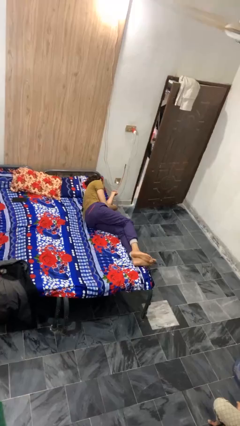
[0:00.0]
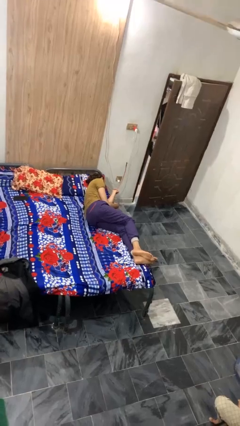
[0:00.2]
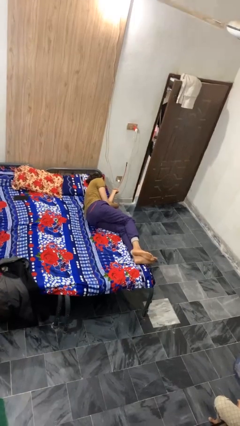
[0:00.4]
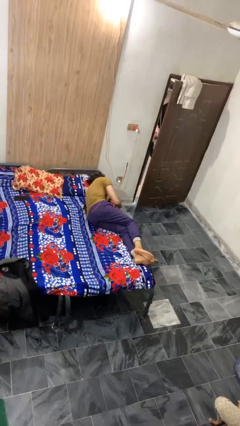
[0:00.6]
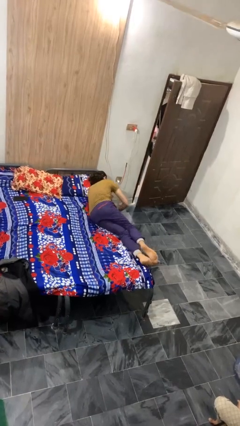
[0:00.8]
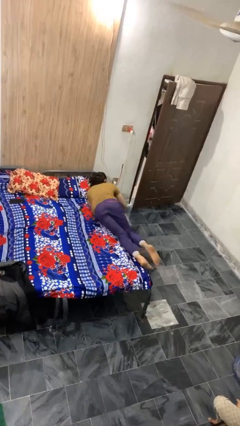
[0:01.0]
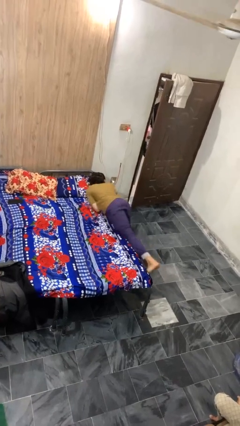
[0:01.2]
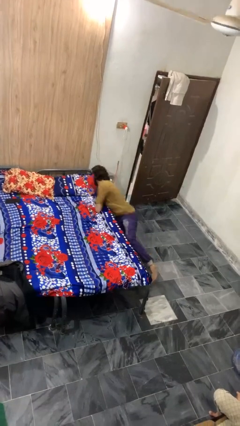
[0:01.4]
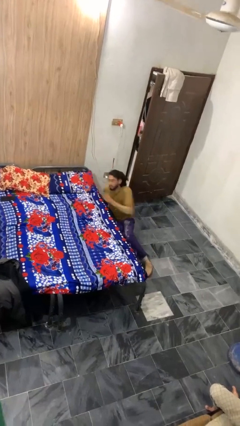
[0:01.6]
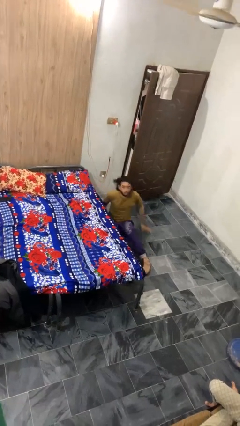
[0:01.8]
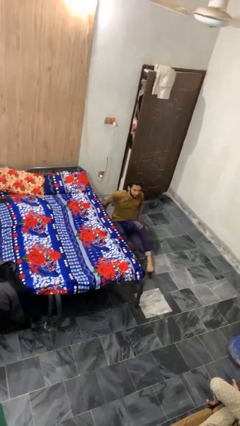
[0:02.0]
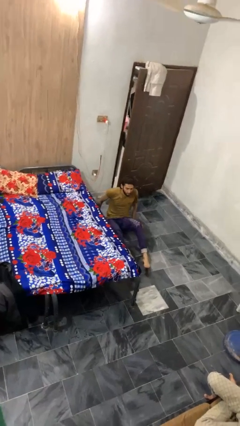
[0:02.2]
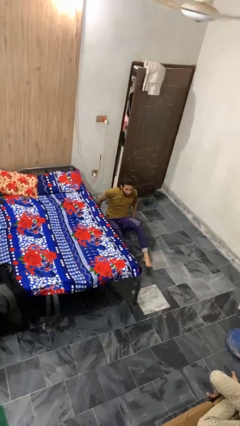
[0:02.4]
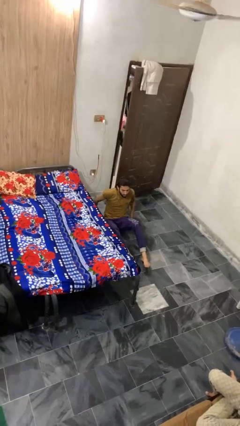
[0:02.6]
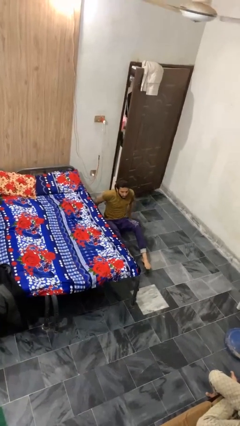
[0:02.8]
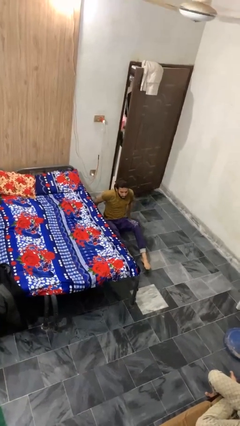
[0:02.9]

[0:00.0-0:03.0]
person falls from bed

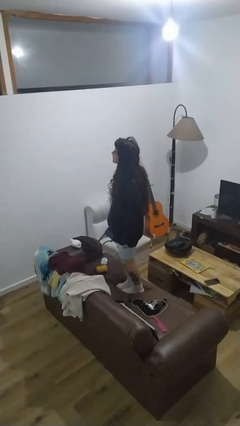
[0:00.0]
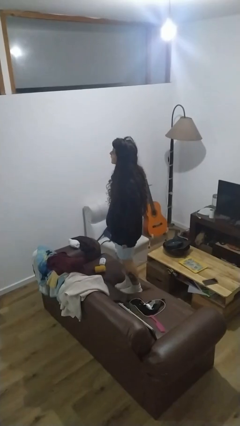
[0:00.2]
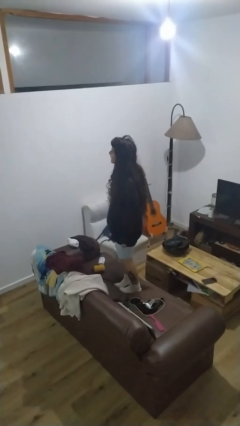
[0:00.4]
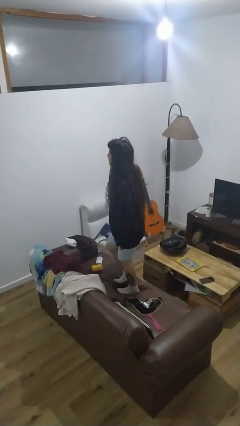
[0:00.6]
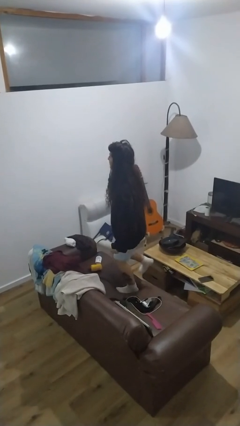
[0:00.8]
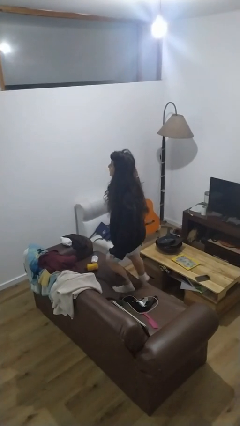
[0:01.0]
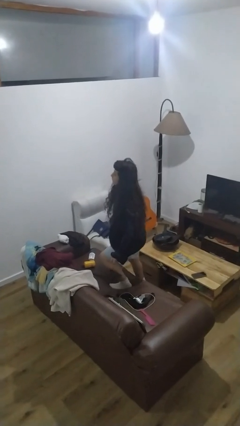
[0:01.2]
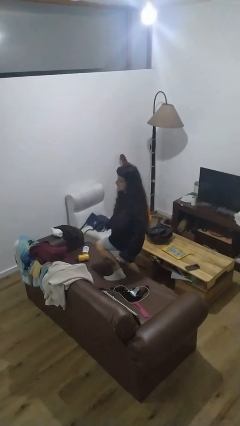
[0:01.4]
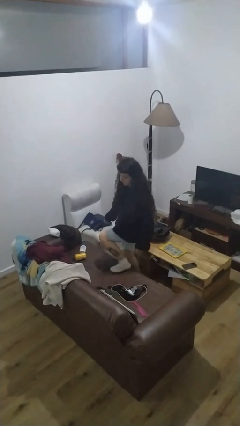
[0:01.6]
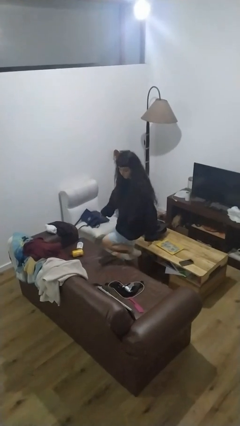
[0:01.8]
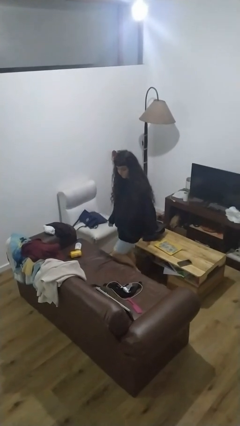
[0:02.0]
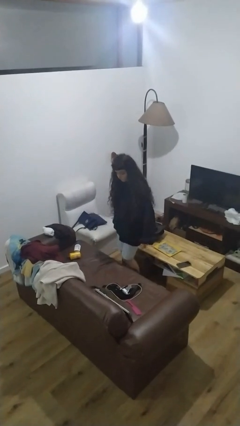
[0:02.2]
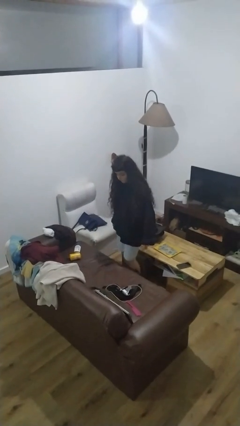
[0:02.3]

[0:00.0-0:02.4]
person climbs off couch

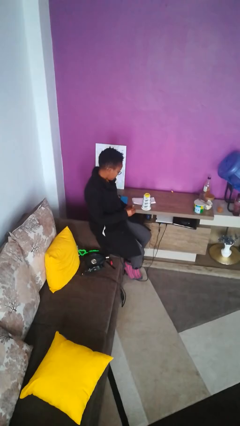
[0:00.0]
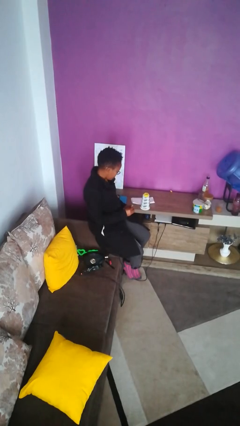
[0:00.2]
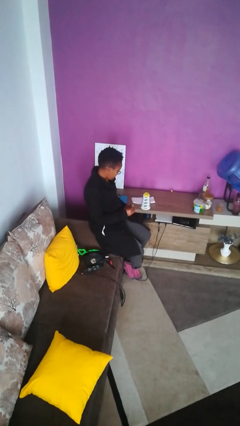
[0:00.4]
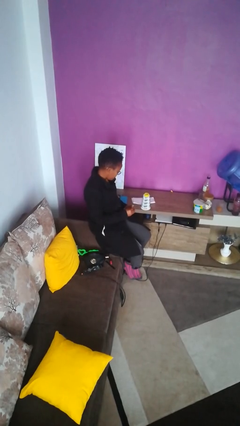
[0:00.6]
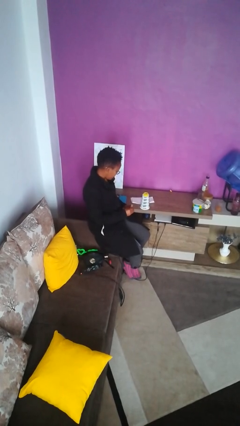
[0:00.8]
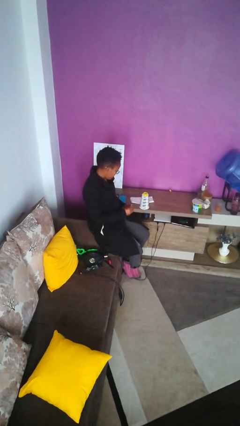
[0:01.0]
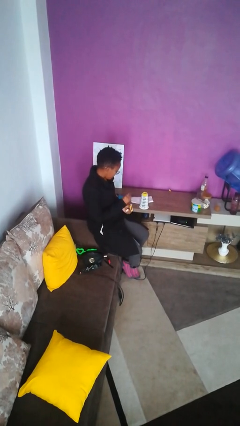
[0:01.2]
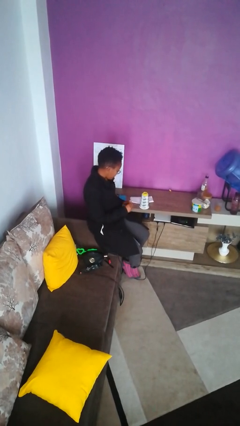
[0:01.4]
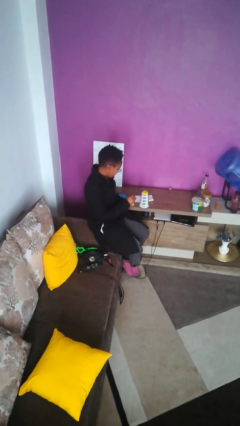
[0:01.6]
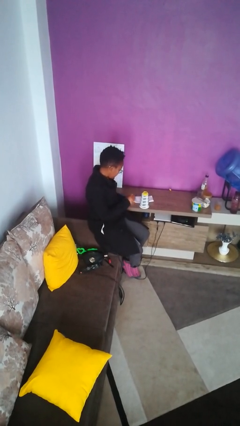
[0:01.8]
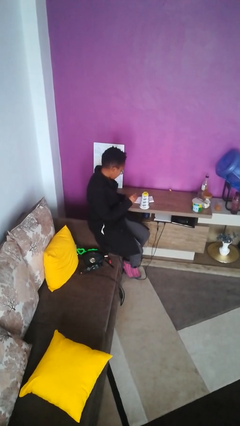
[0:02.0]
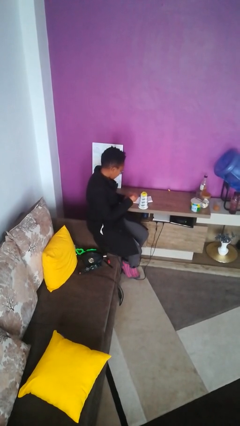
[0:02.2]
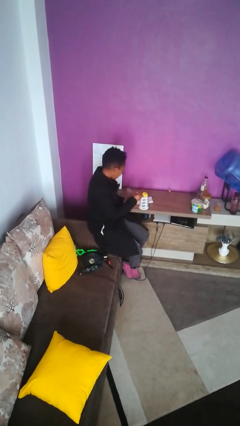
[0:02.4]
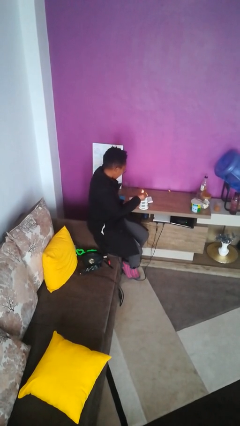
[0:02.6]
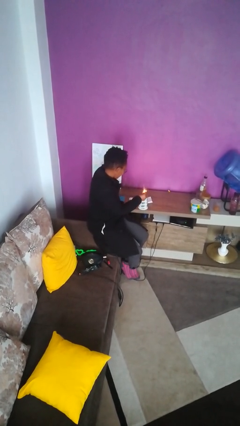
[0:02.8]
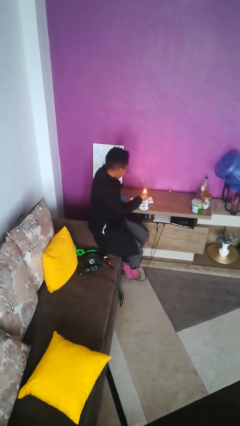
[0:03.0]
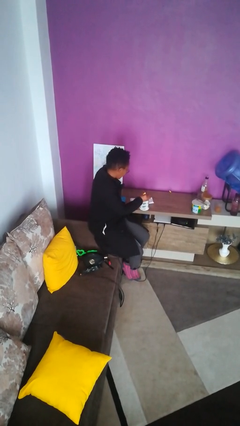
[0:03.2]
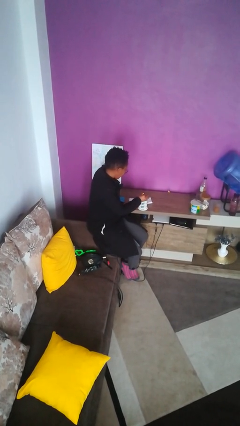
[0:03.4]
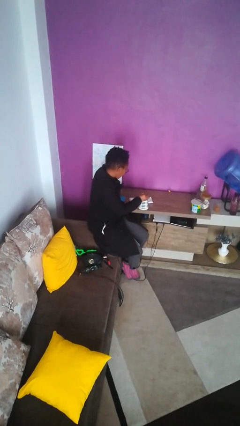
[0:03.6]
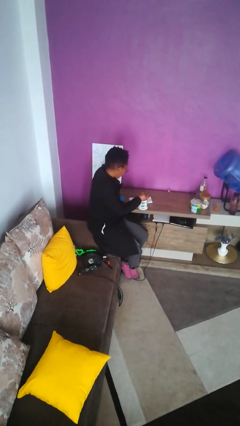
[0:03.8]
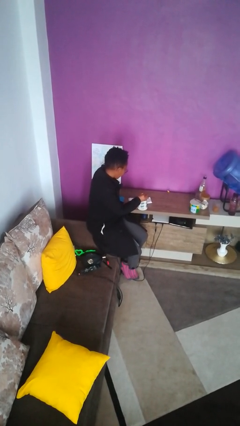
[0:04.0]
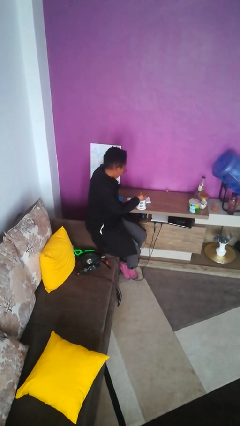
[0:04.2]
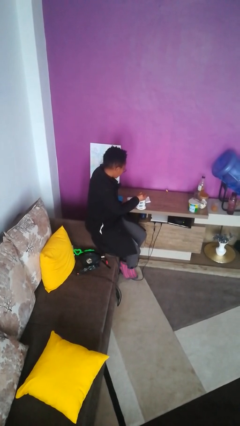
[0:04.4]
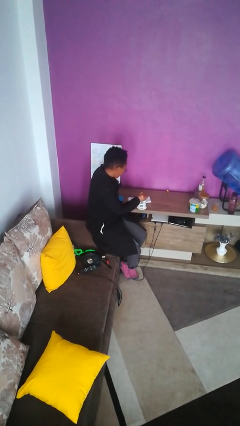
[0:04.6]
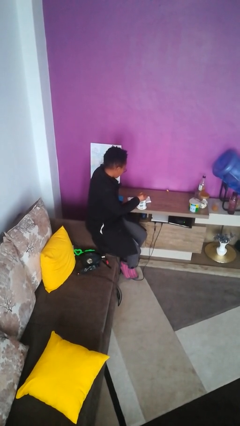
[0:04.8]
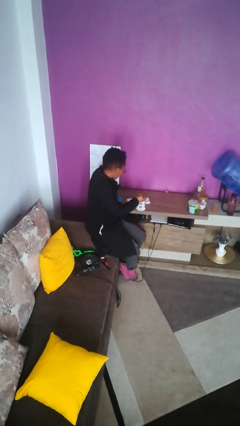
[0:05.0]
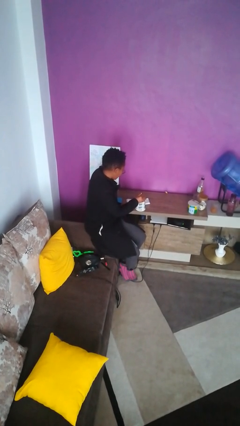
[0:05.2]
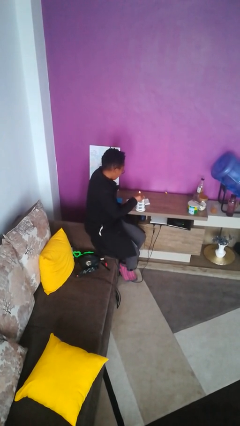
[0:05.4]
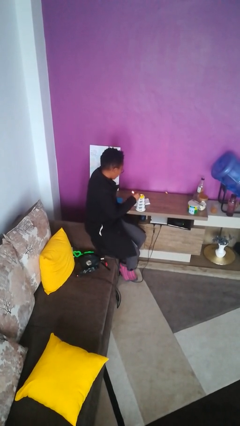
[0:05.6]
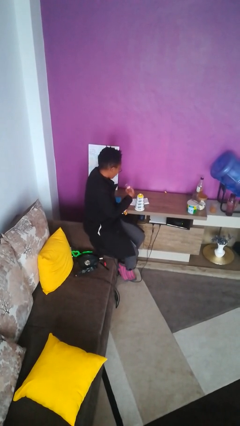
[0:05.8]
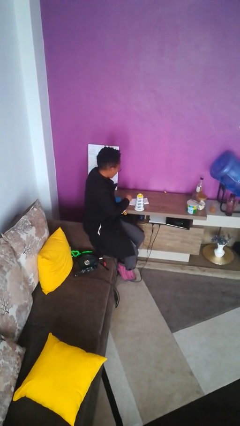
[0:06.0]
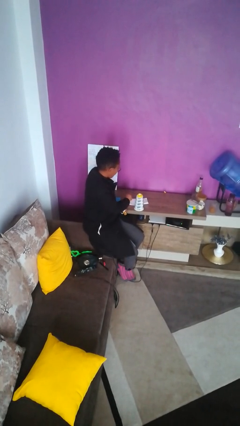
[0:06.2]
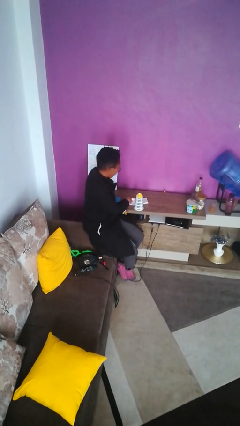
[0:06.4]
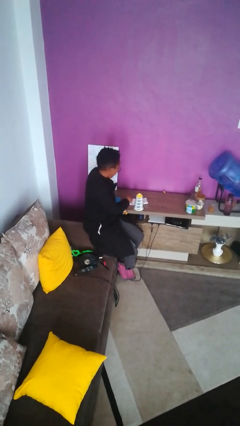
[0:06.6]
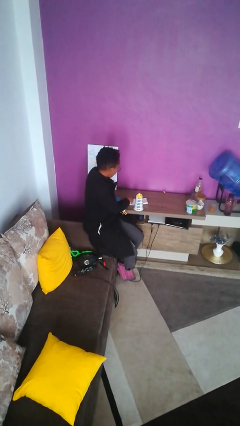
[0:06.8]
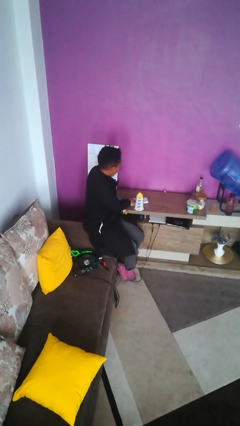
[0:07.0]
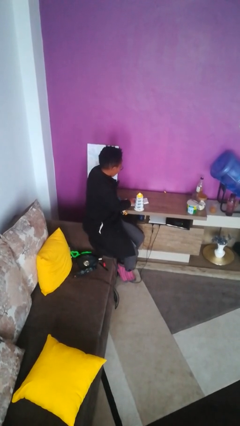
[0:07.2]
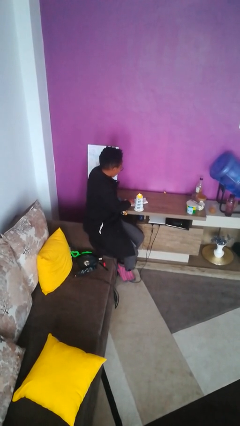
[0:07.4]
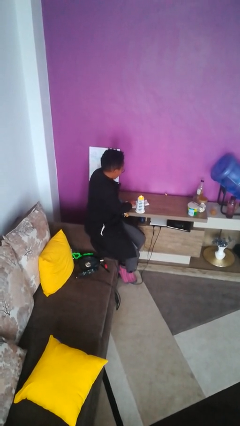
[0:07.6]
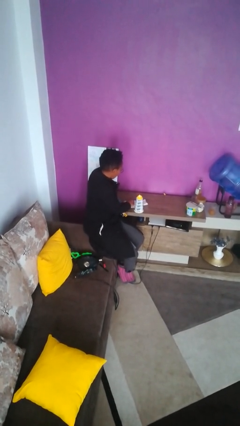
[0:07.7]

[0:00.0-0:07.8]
person lights candle

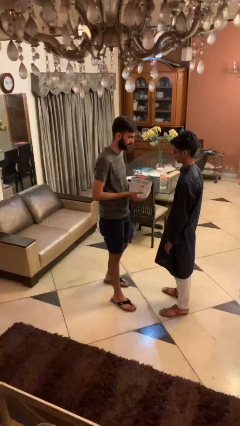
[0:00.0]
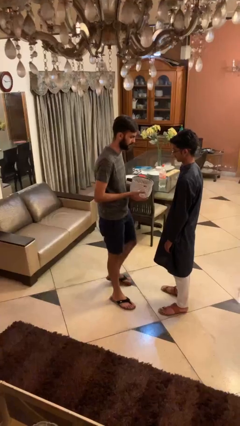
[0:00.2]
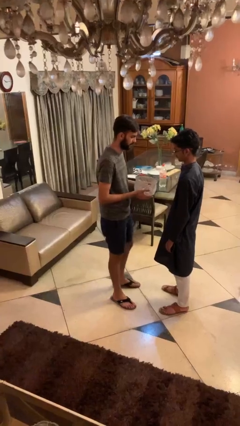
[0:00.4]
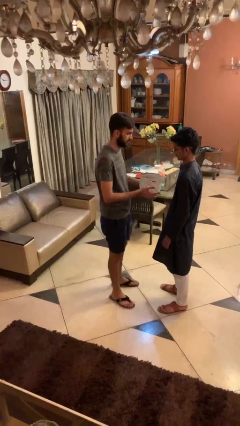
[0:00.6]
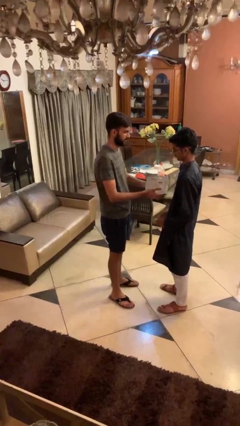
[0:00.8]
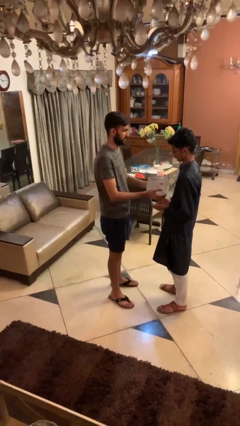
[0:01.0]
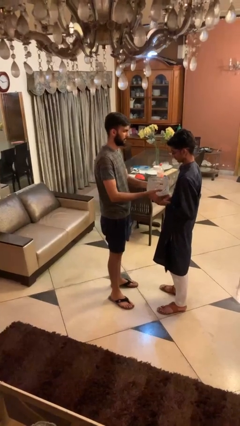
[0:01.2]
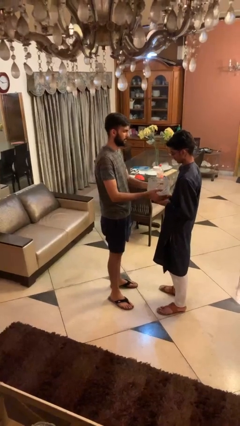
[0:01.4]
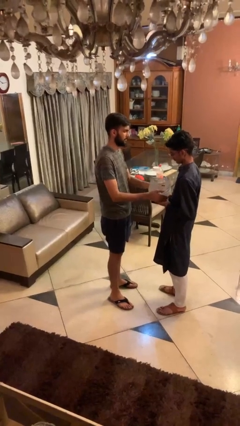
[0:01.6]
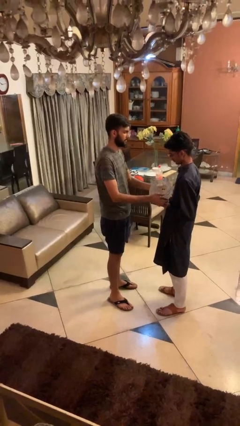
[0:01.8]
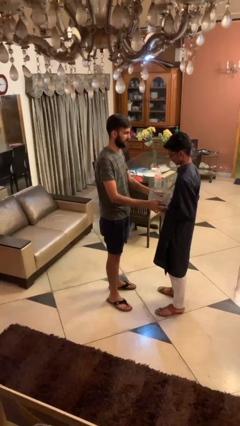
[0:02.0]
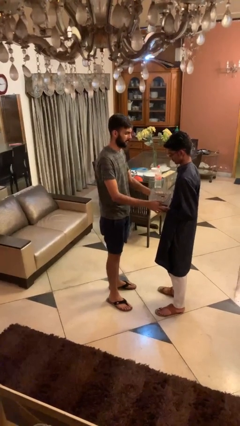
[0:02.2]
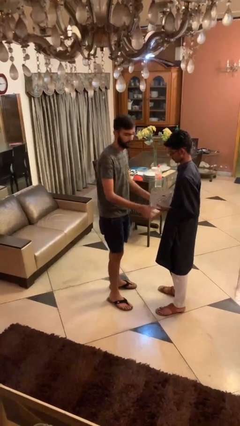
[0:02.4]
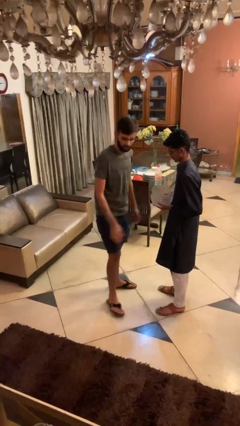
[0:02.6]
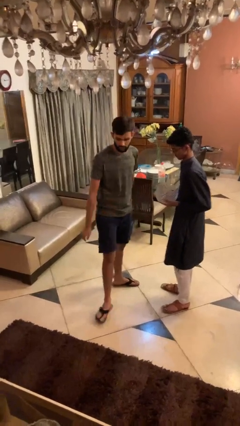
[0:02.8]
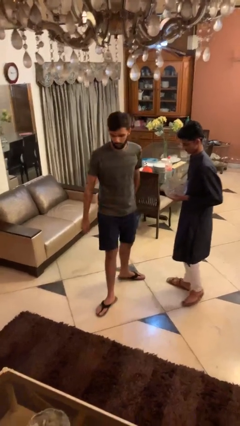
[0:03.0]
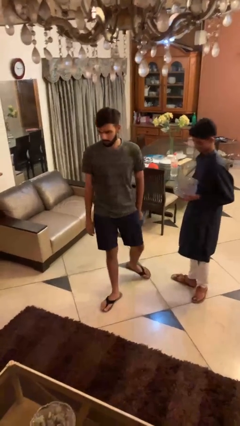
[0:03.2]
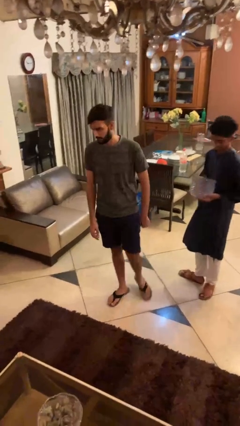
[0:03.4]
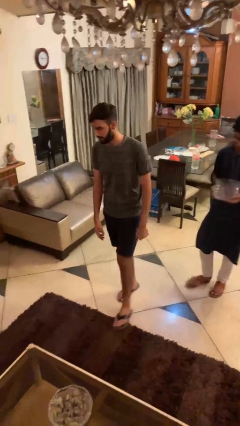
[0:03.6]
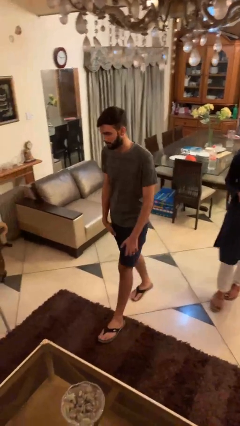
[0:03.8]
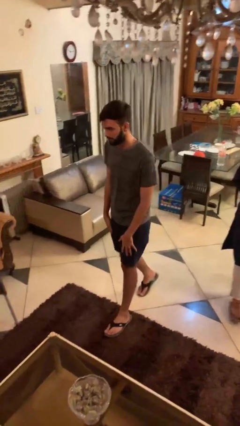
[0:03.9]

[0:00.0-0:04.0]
person transfers object to person

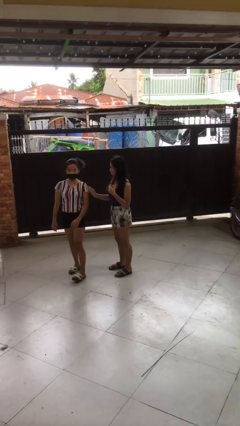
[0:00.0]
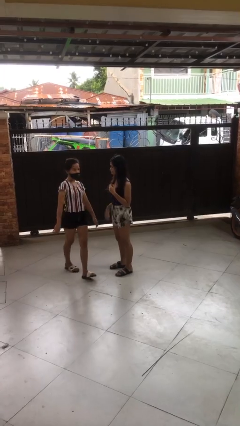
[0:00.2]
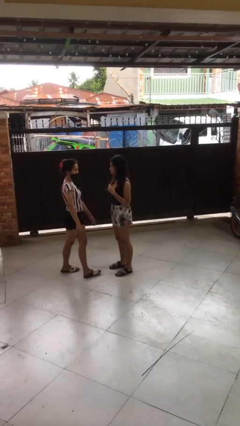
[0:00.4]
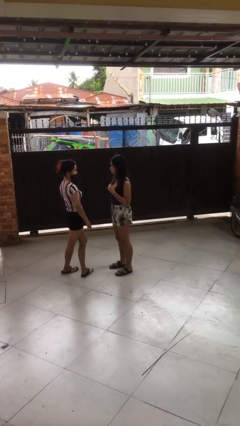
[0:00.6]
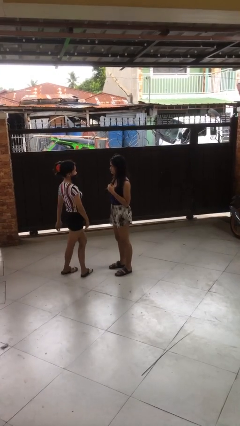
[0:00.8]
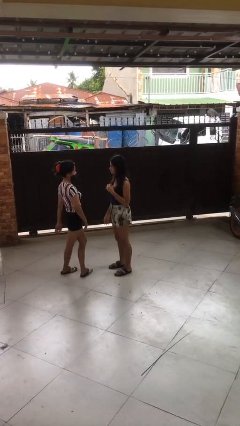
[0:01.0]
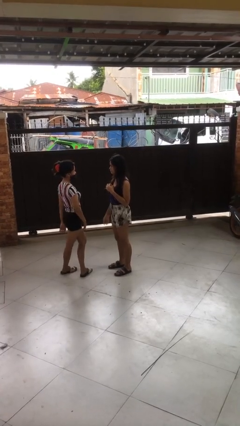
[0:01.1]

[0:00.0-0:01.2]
person spins person around
